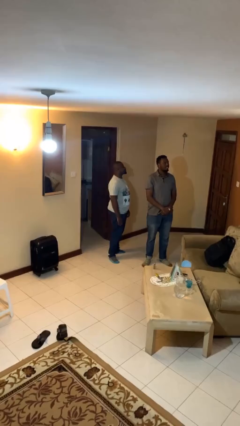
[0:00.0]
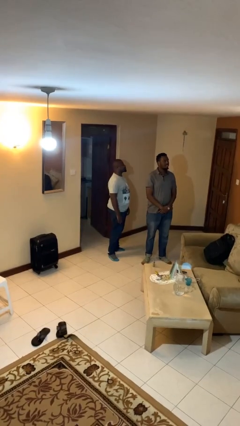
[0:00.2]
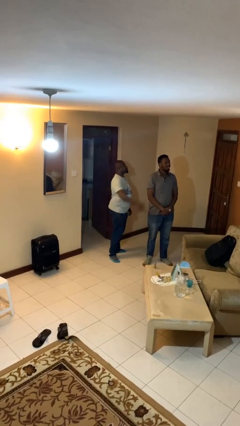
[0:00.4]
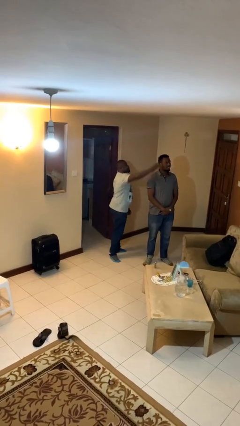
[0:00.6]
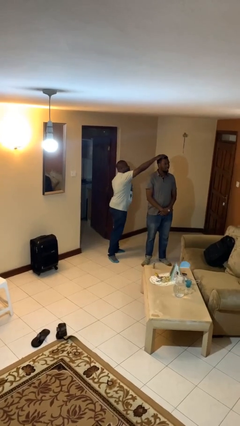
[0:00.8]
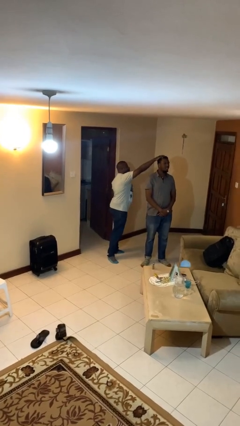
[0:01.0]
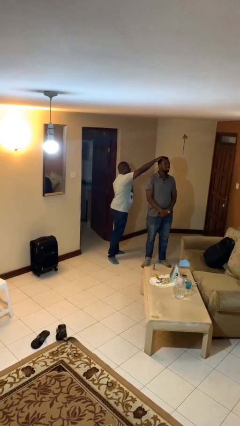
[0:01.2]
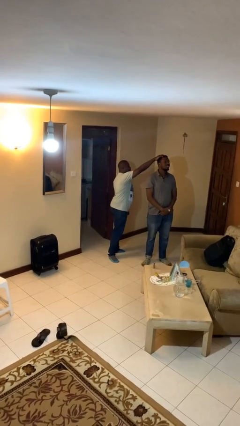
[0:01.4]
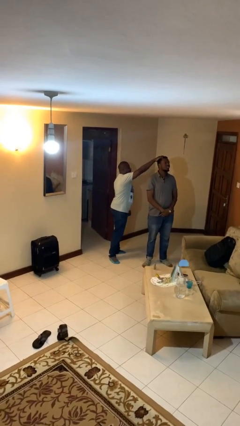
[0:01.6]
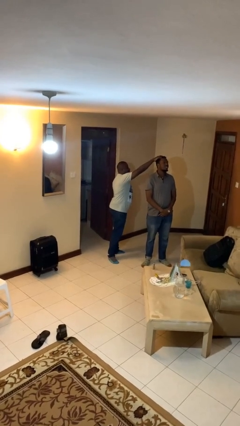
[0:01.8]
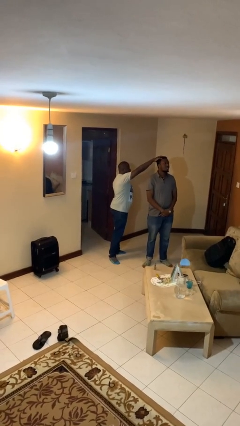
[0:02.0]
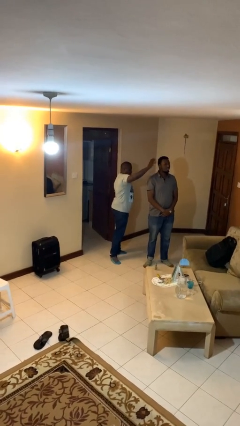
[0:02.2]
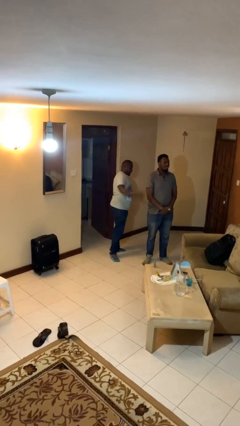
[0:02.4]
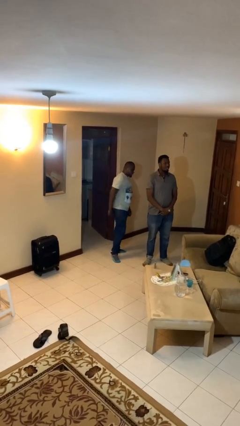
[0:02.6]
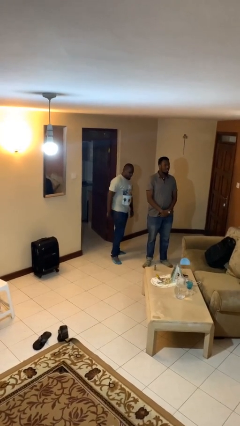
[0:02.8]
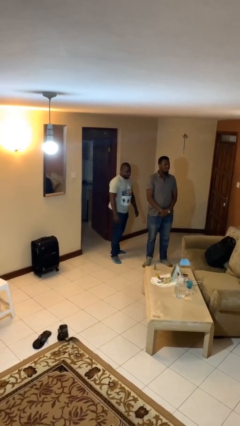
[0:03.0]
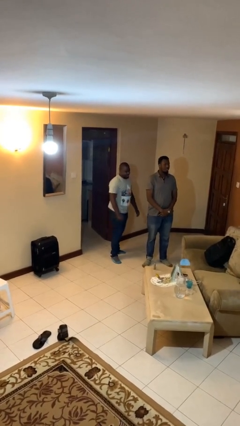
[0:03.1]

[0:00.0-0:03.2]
person grabs person by hair

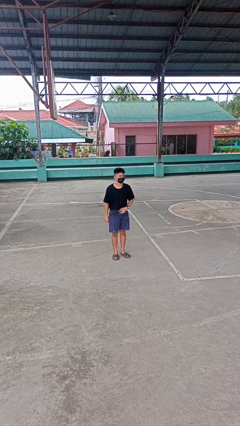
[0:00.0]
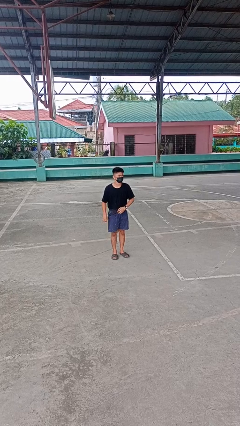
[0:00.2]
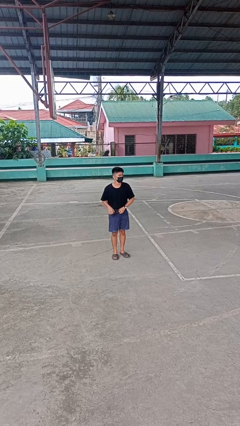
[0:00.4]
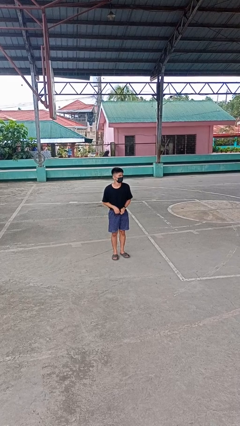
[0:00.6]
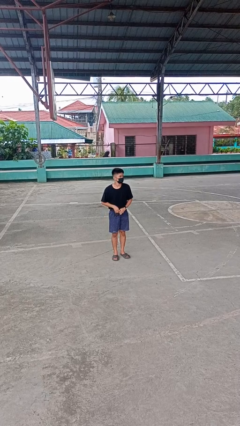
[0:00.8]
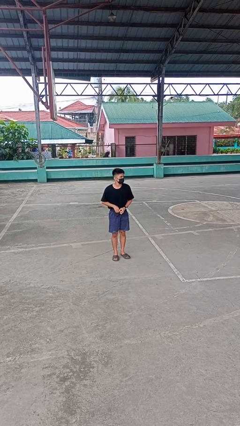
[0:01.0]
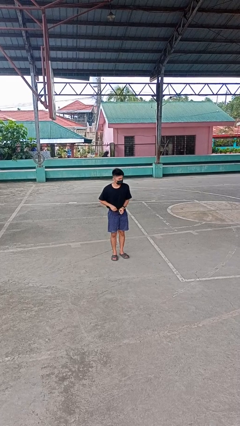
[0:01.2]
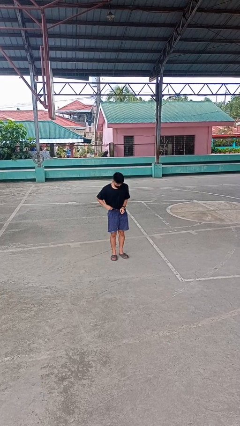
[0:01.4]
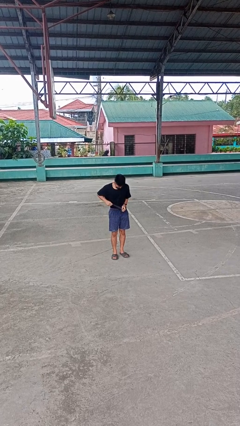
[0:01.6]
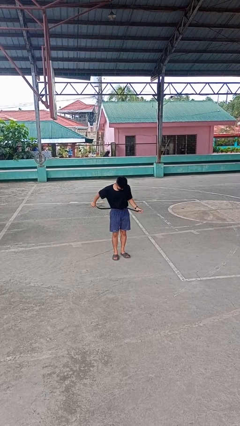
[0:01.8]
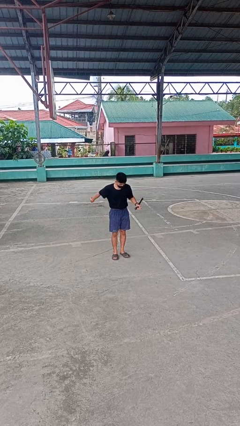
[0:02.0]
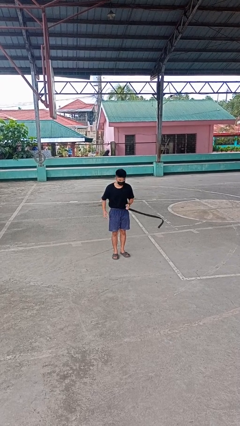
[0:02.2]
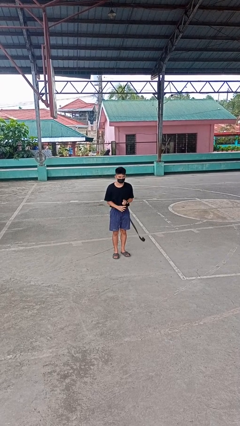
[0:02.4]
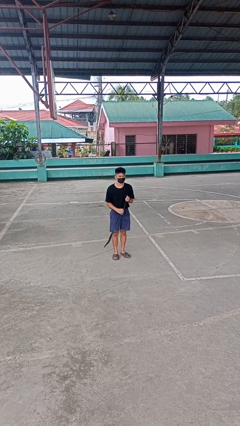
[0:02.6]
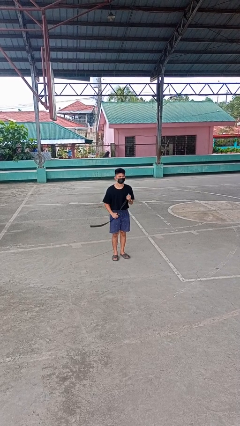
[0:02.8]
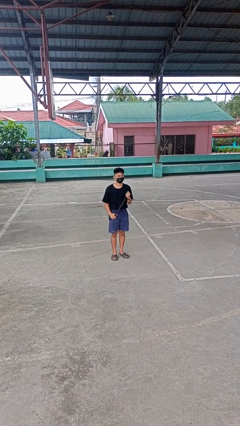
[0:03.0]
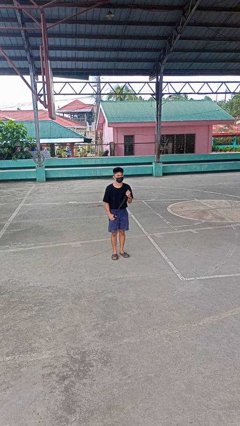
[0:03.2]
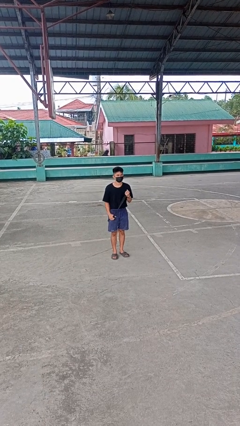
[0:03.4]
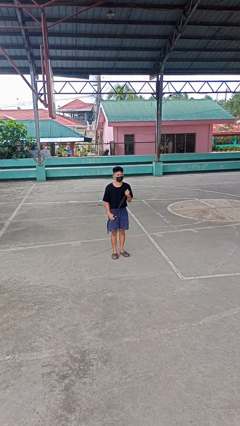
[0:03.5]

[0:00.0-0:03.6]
person takes off belt

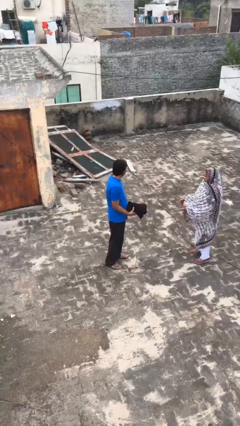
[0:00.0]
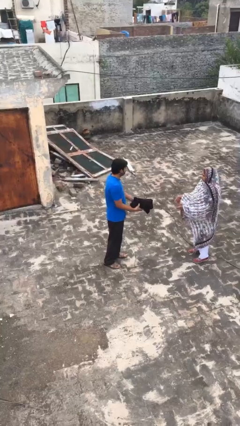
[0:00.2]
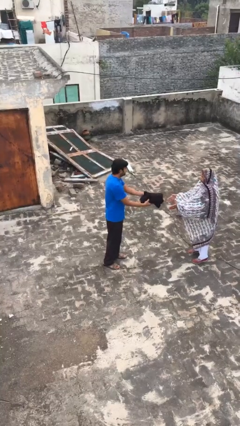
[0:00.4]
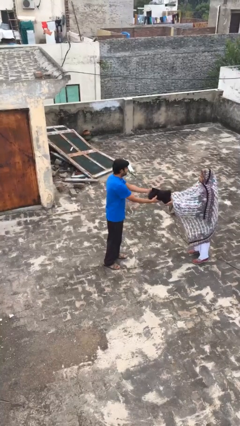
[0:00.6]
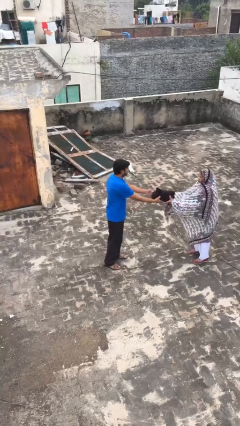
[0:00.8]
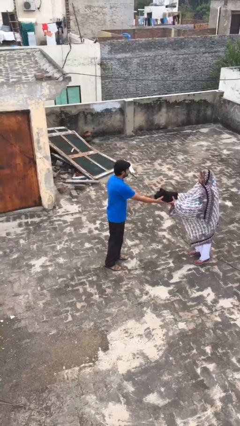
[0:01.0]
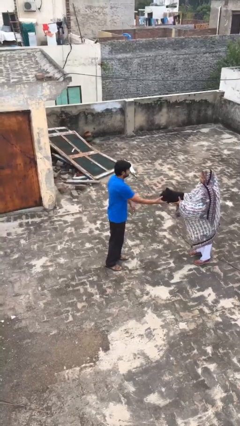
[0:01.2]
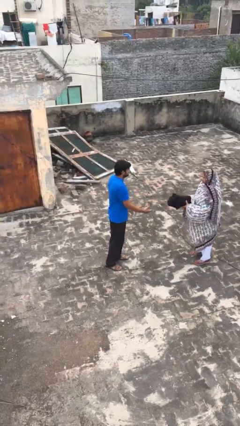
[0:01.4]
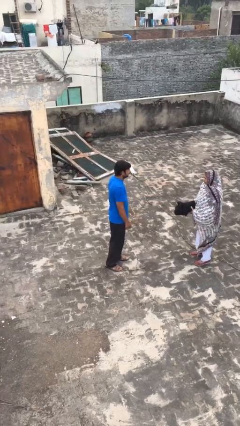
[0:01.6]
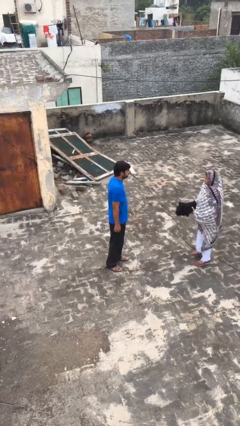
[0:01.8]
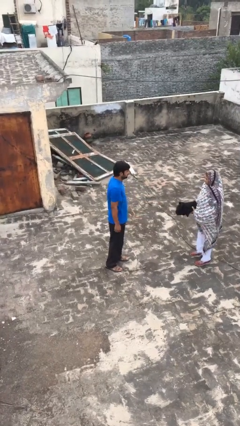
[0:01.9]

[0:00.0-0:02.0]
person transfers object to person

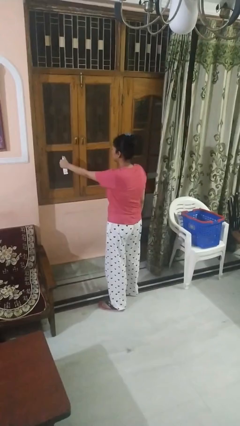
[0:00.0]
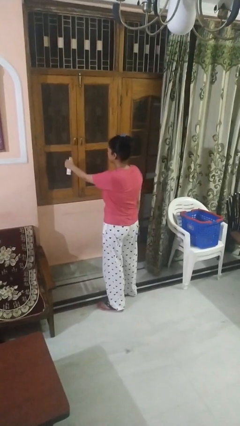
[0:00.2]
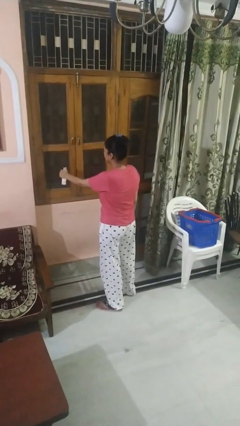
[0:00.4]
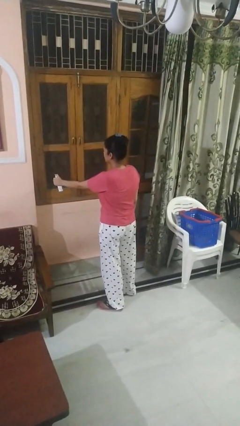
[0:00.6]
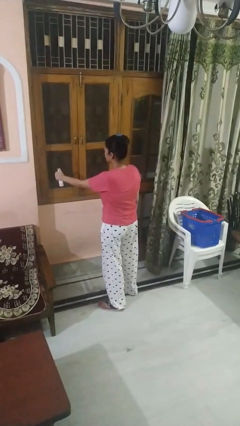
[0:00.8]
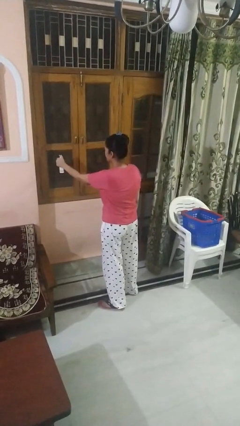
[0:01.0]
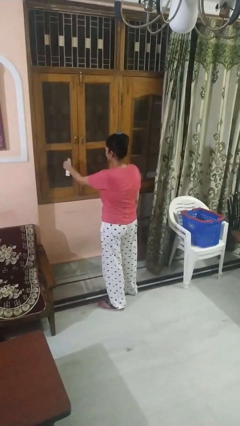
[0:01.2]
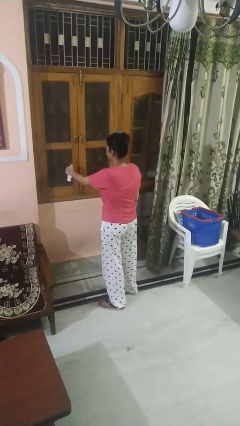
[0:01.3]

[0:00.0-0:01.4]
person sprays from bottle

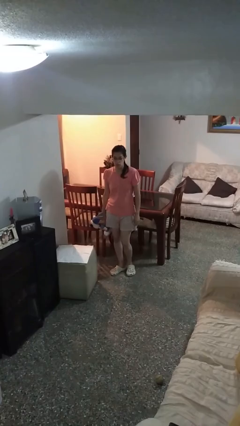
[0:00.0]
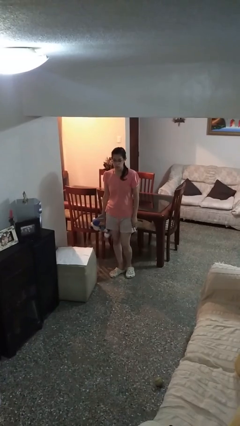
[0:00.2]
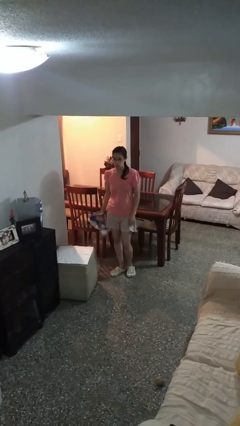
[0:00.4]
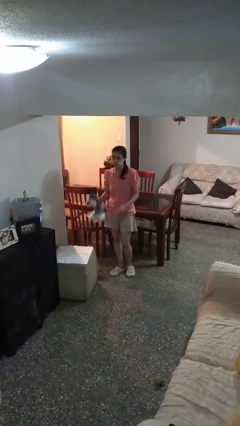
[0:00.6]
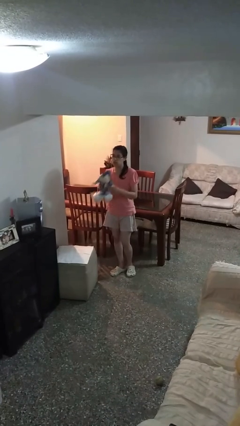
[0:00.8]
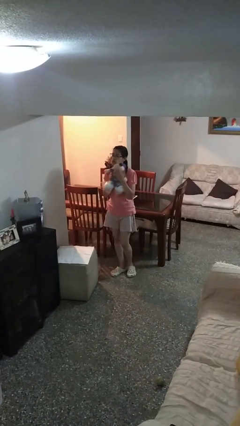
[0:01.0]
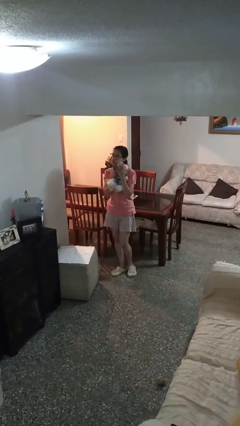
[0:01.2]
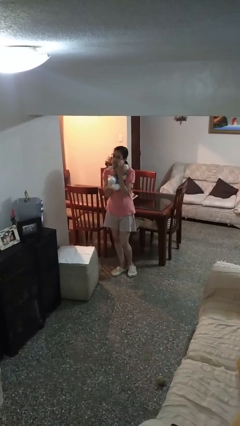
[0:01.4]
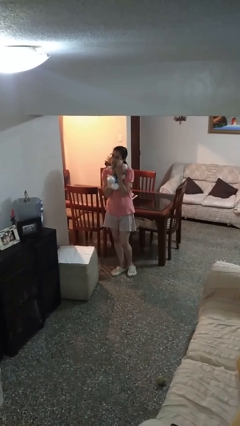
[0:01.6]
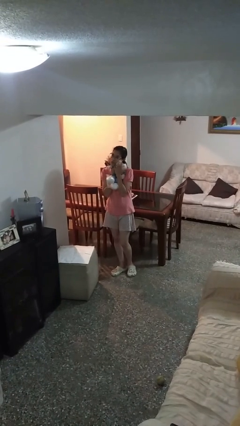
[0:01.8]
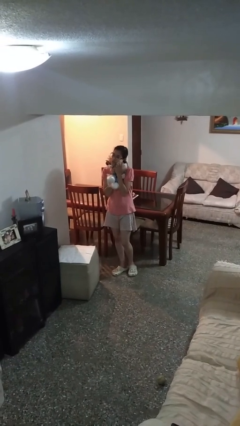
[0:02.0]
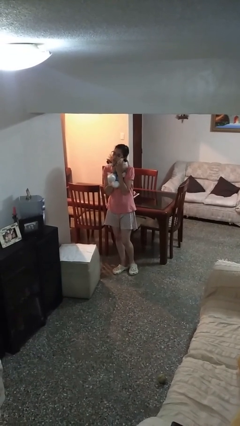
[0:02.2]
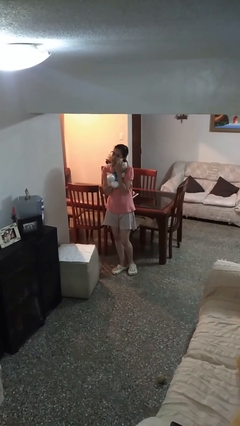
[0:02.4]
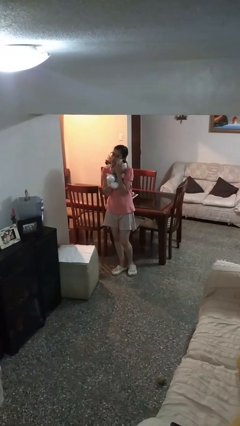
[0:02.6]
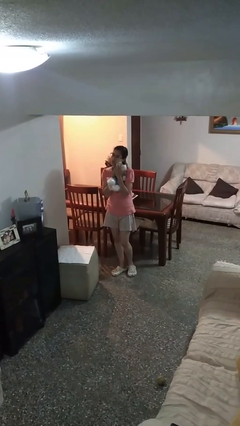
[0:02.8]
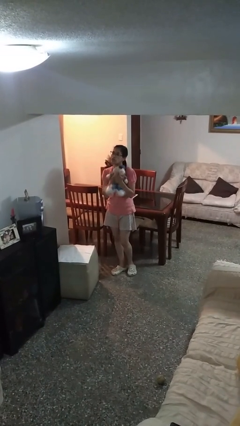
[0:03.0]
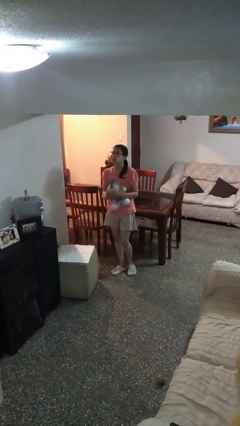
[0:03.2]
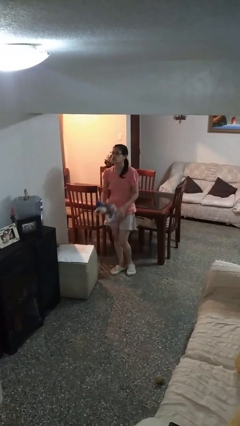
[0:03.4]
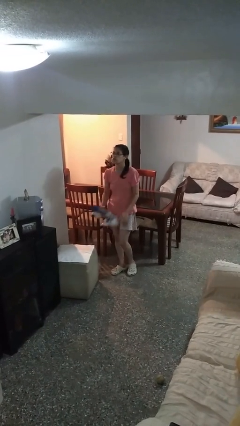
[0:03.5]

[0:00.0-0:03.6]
person hugs stuffed animal

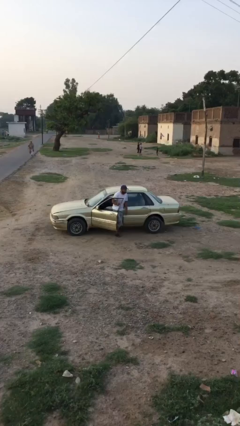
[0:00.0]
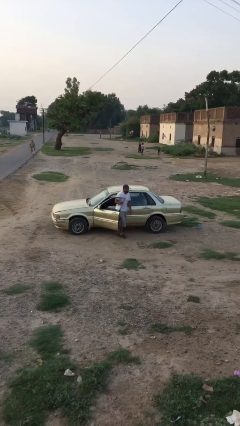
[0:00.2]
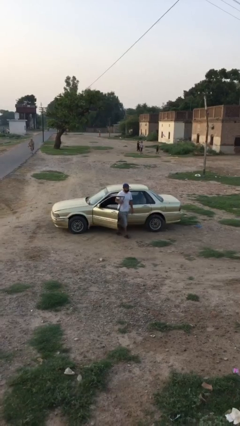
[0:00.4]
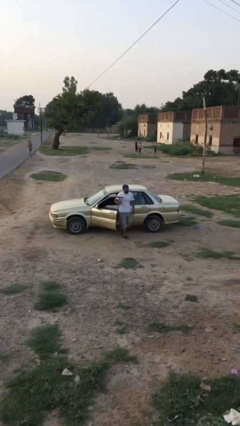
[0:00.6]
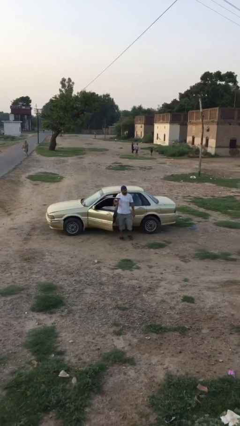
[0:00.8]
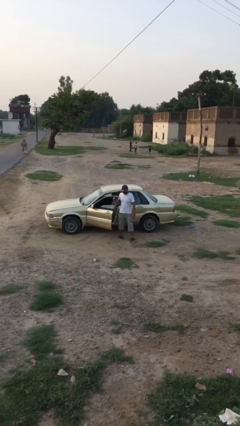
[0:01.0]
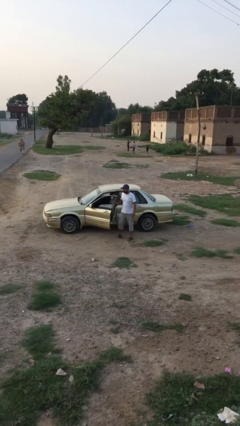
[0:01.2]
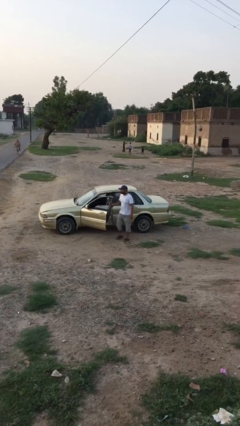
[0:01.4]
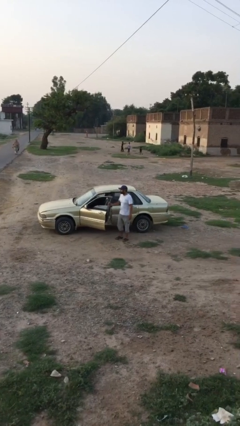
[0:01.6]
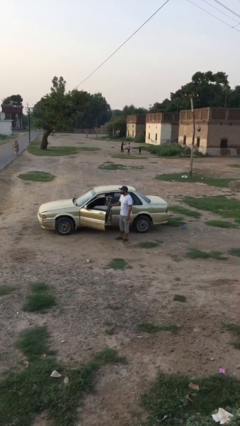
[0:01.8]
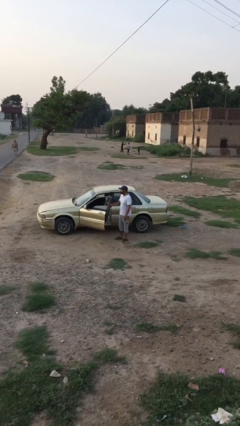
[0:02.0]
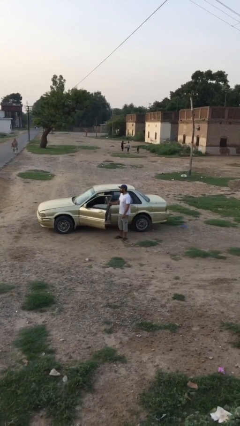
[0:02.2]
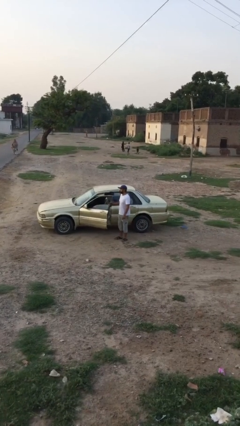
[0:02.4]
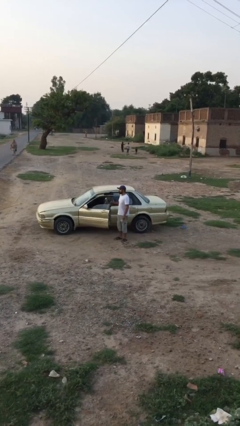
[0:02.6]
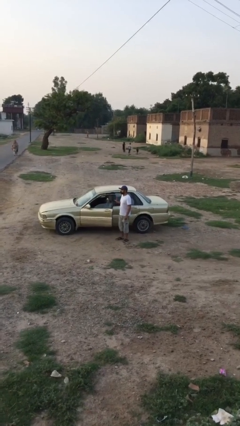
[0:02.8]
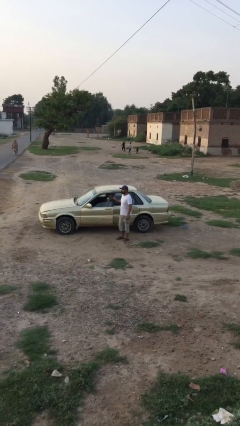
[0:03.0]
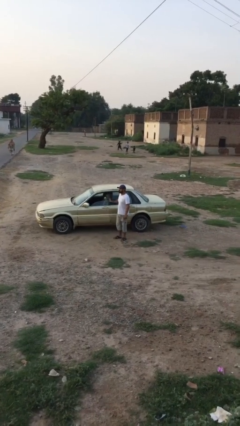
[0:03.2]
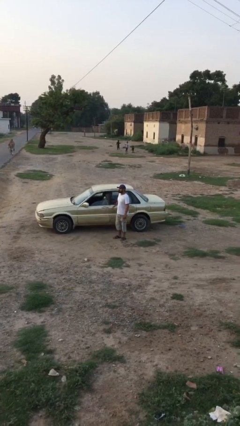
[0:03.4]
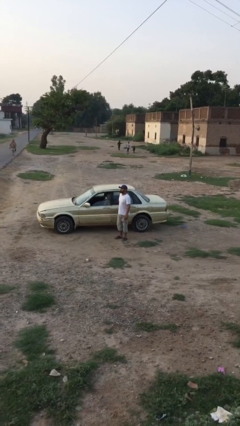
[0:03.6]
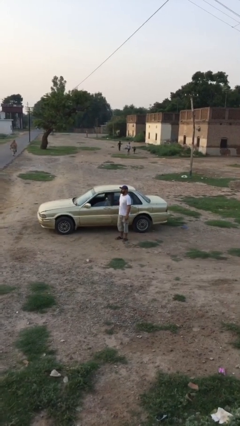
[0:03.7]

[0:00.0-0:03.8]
person closes car door
